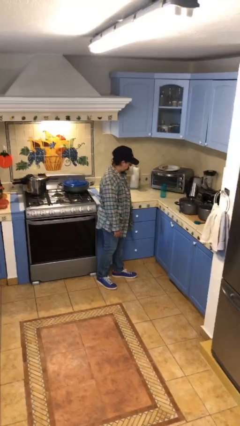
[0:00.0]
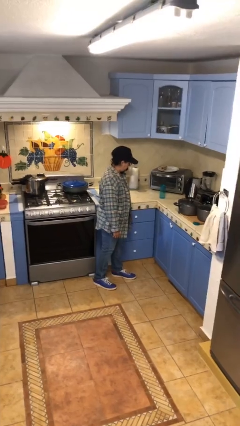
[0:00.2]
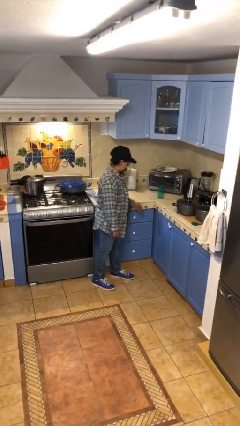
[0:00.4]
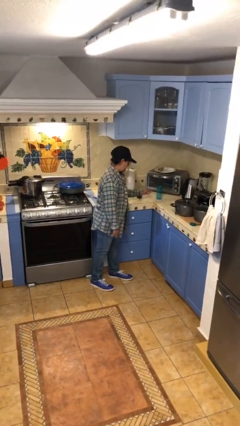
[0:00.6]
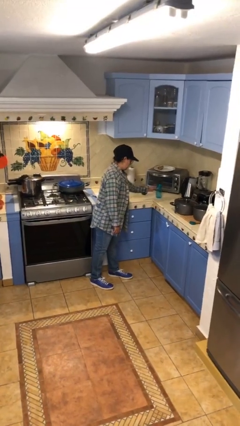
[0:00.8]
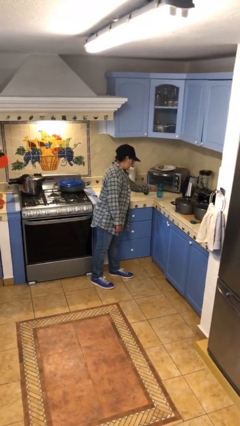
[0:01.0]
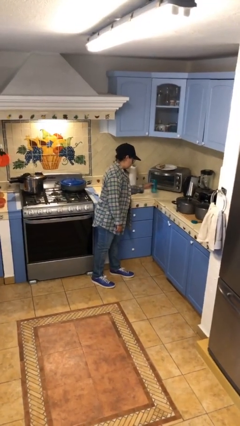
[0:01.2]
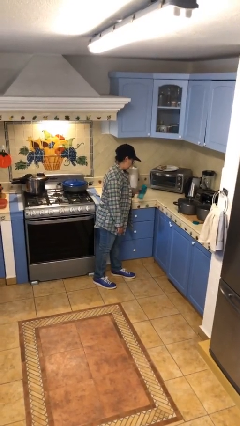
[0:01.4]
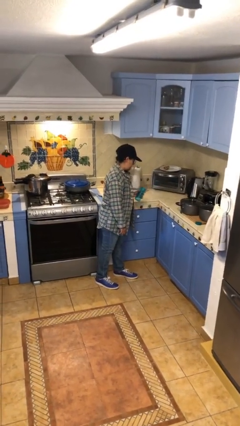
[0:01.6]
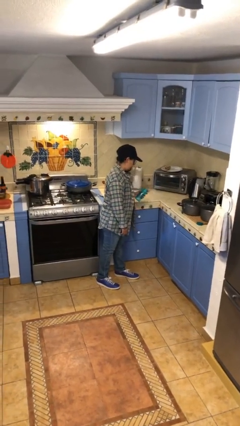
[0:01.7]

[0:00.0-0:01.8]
person picks up object from countertop

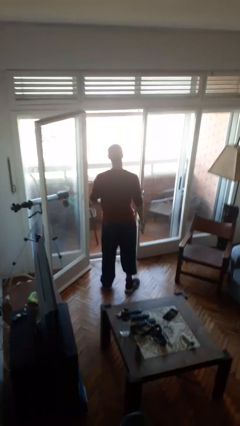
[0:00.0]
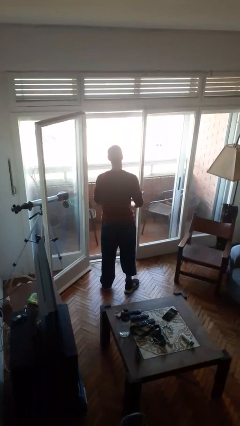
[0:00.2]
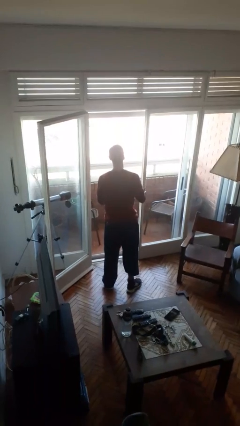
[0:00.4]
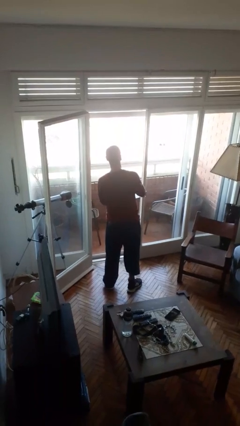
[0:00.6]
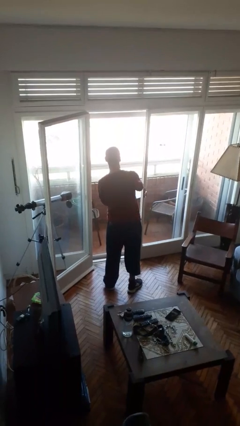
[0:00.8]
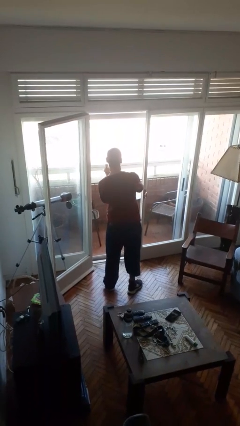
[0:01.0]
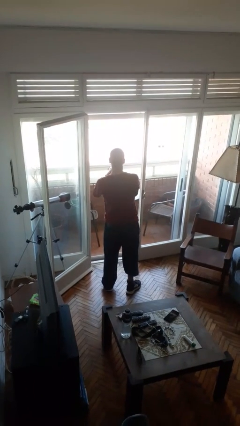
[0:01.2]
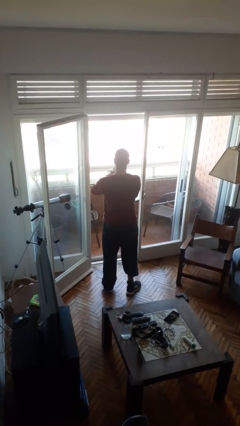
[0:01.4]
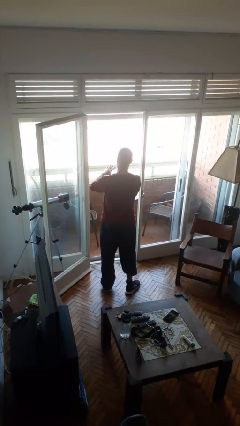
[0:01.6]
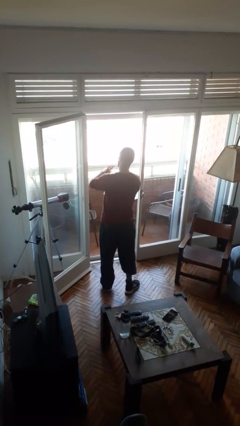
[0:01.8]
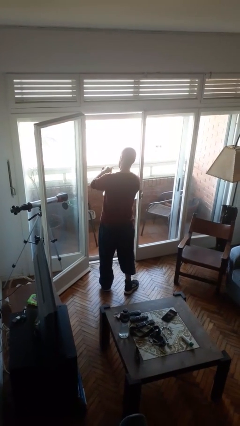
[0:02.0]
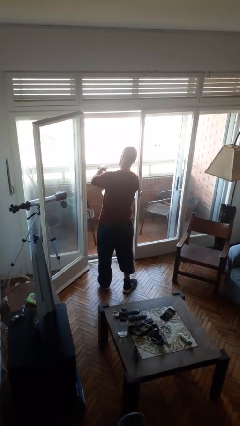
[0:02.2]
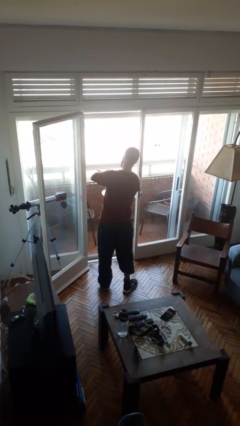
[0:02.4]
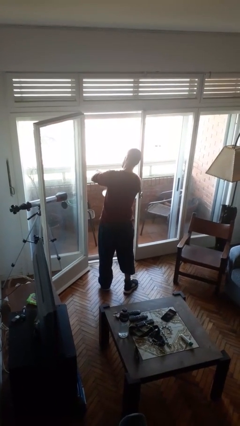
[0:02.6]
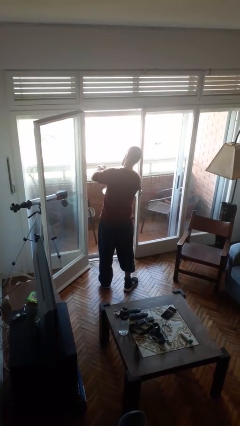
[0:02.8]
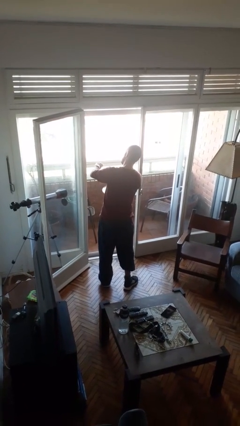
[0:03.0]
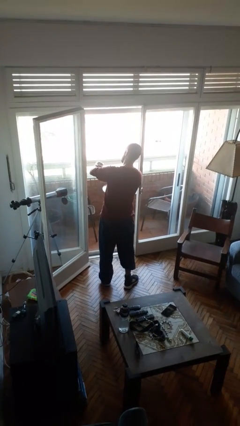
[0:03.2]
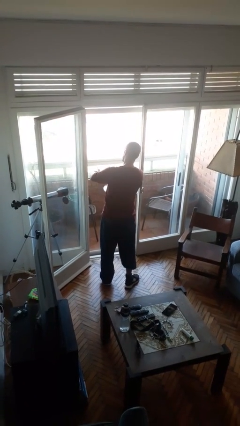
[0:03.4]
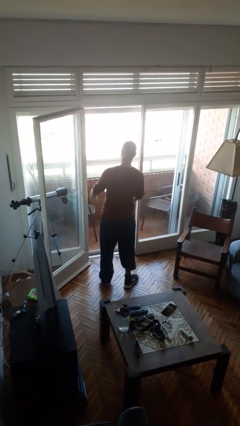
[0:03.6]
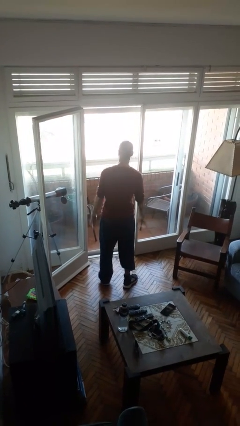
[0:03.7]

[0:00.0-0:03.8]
person puts on wristwatch

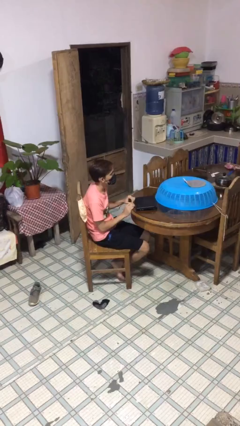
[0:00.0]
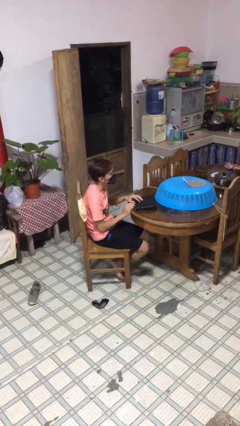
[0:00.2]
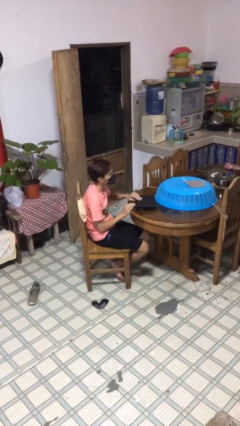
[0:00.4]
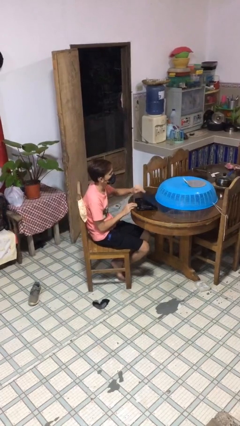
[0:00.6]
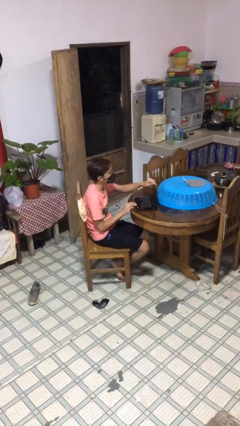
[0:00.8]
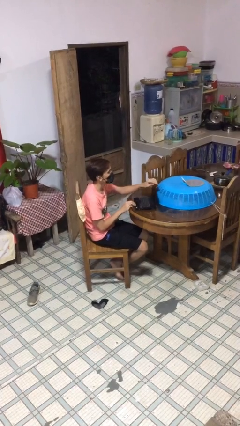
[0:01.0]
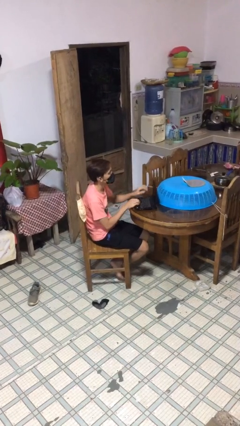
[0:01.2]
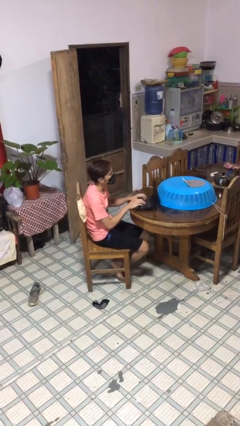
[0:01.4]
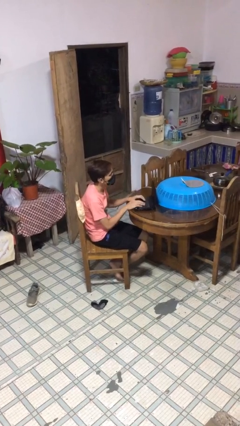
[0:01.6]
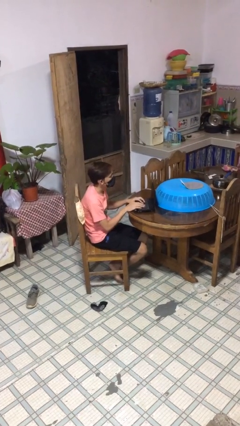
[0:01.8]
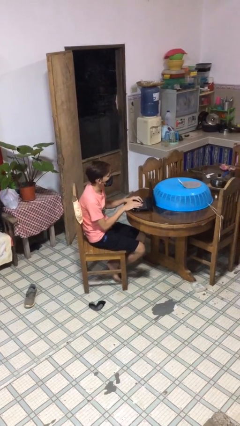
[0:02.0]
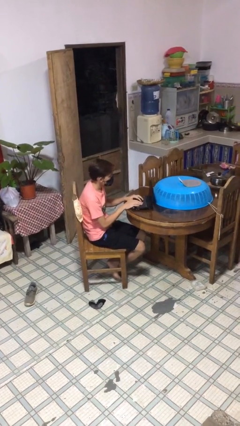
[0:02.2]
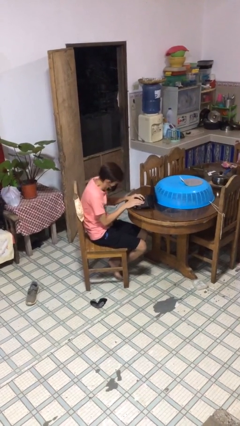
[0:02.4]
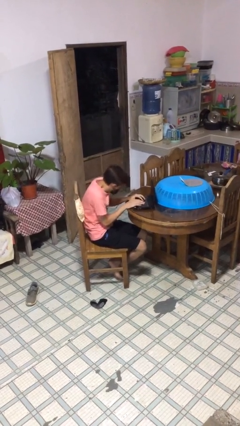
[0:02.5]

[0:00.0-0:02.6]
person interacts with laptop

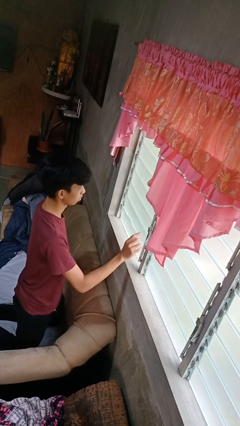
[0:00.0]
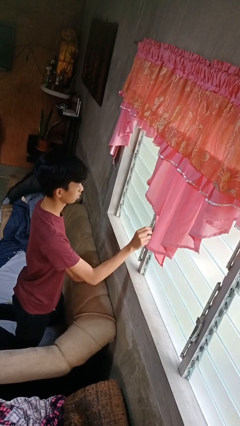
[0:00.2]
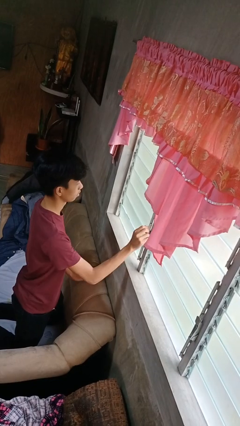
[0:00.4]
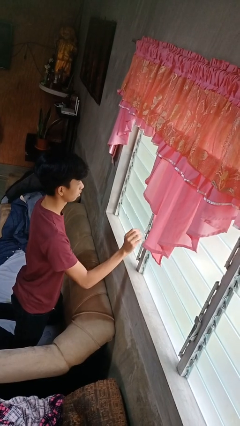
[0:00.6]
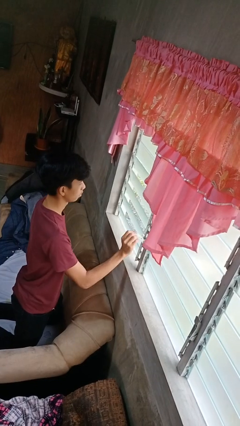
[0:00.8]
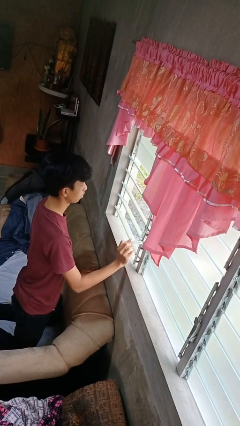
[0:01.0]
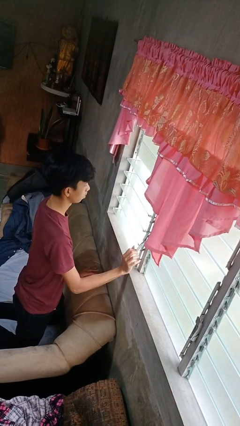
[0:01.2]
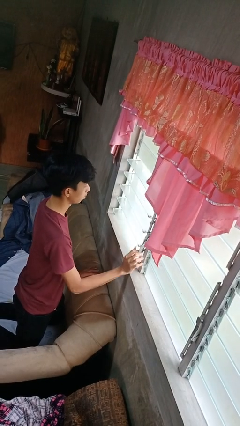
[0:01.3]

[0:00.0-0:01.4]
person opens home window

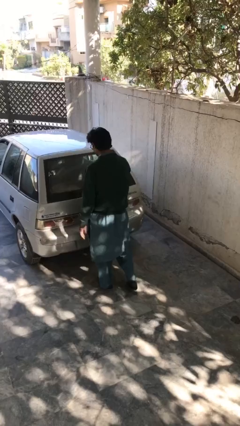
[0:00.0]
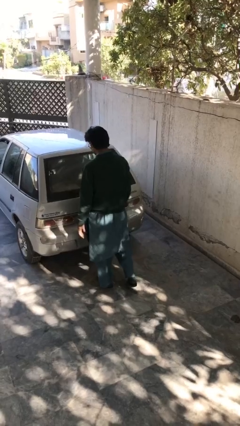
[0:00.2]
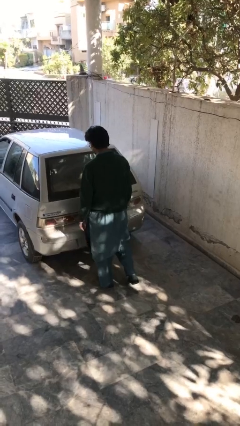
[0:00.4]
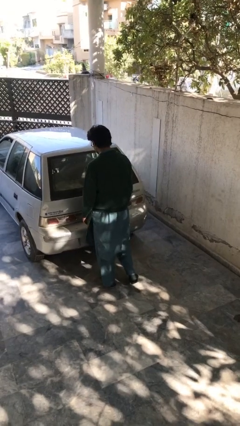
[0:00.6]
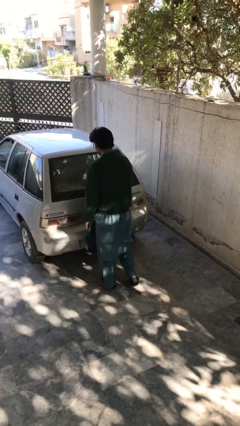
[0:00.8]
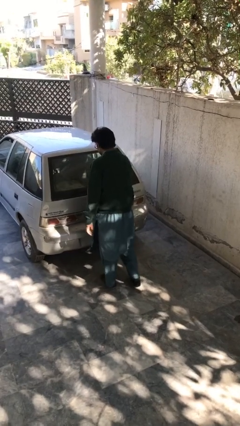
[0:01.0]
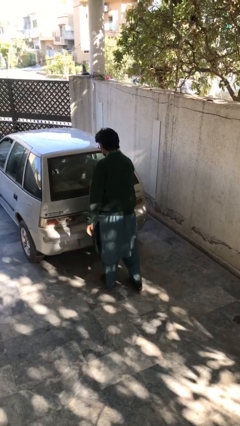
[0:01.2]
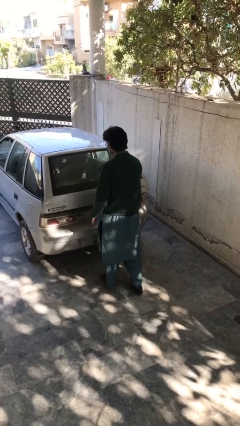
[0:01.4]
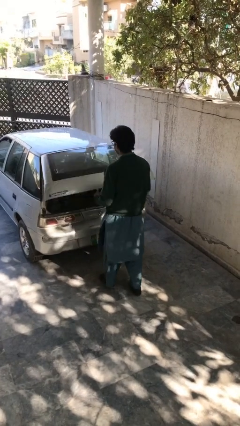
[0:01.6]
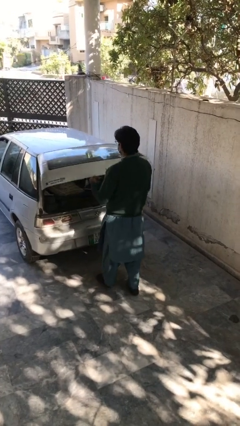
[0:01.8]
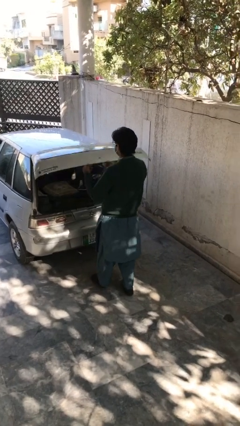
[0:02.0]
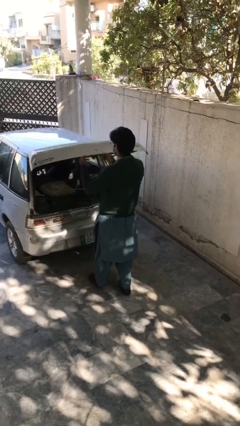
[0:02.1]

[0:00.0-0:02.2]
person opens car trunk

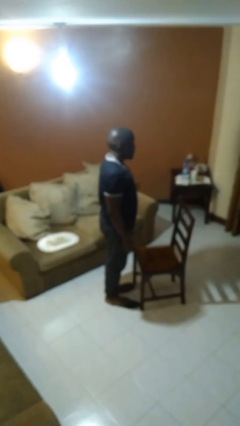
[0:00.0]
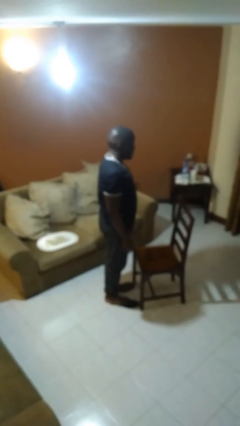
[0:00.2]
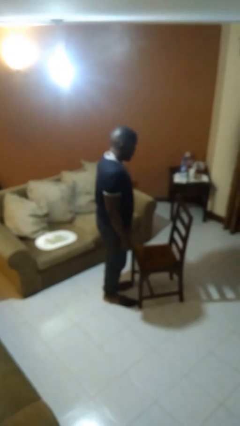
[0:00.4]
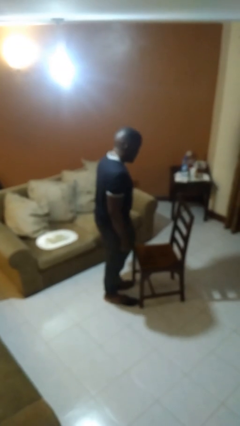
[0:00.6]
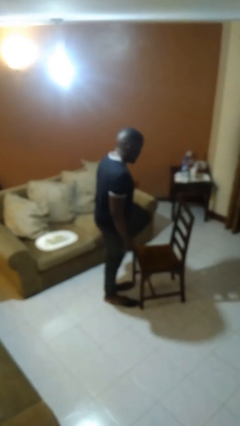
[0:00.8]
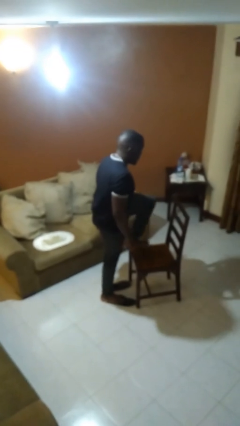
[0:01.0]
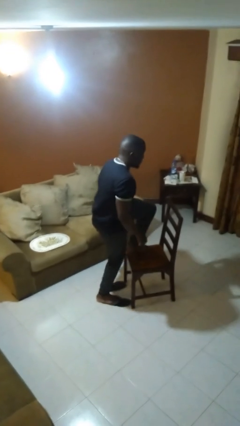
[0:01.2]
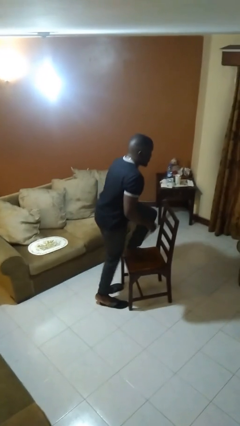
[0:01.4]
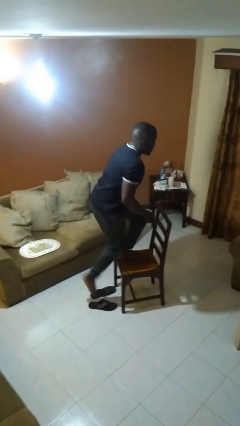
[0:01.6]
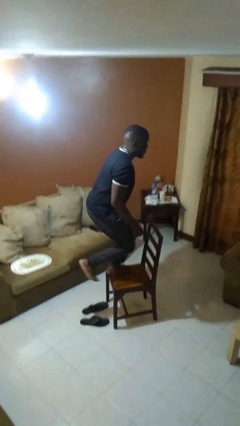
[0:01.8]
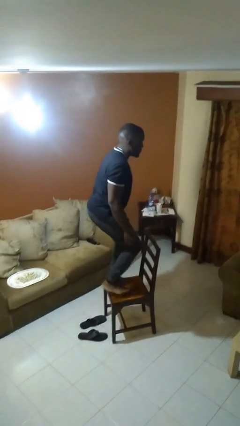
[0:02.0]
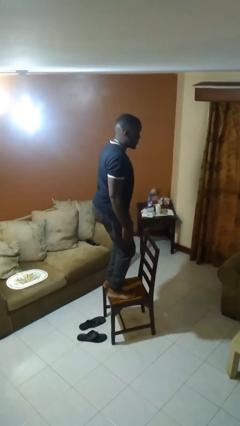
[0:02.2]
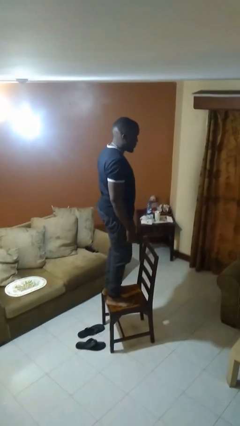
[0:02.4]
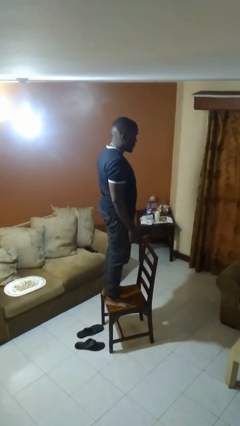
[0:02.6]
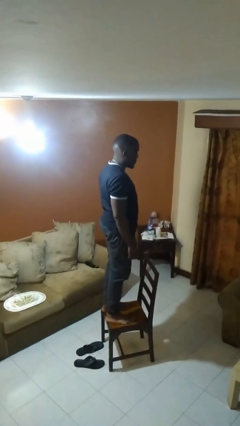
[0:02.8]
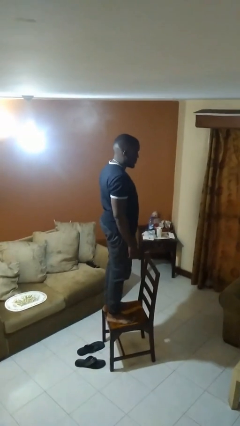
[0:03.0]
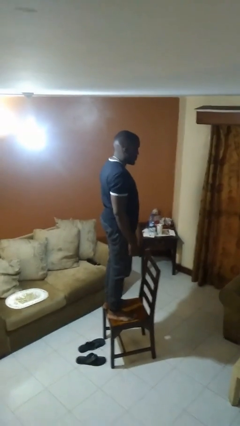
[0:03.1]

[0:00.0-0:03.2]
person climbs on chair

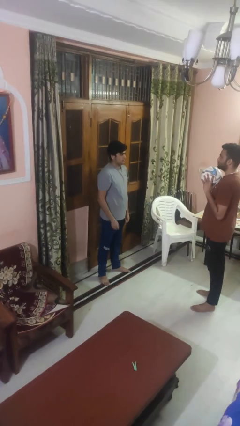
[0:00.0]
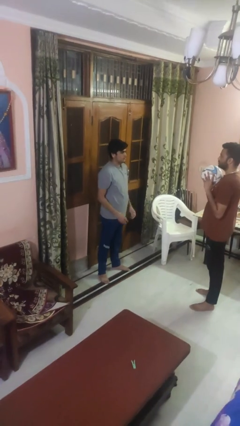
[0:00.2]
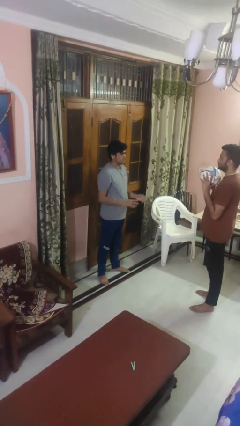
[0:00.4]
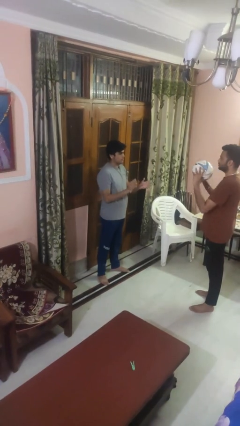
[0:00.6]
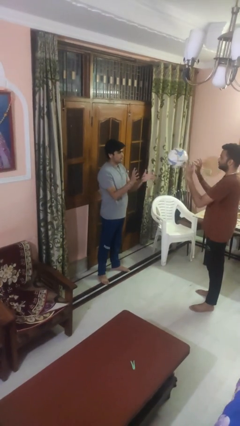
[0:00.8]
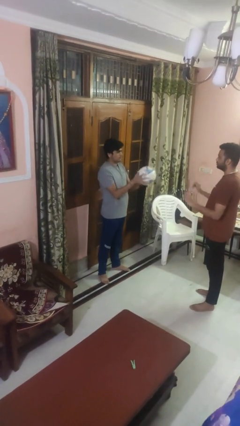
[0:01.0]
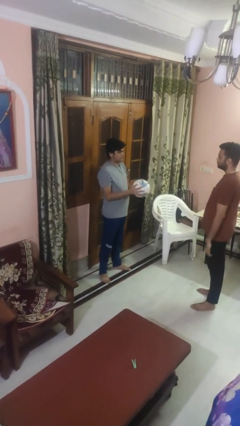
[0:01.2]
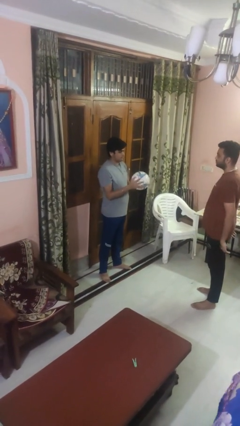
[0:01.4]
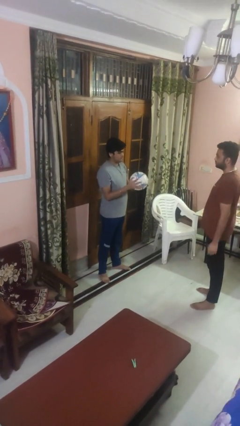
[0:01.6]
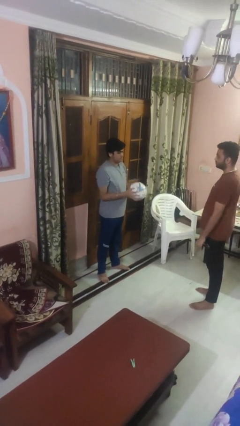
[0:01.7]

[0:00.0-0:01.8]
person catches object from person

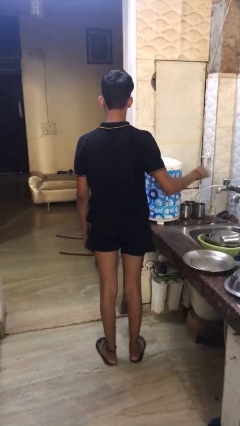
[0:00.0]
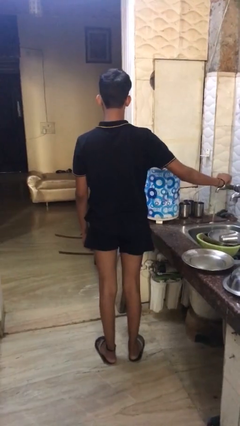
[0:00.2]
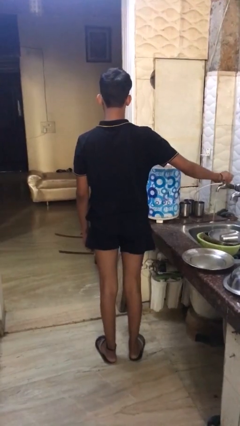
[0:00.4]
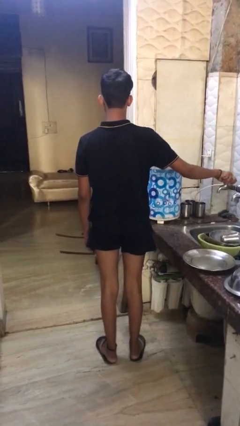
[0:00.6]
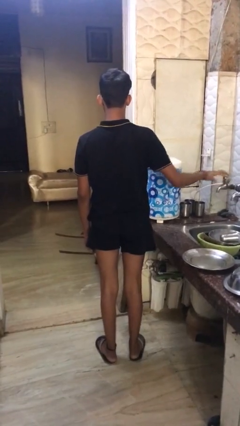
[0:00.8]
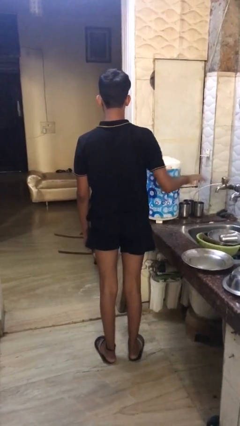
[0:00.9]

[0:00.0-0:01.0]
person turns off faucet
